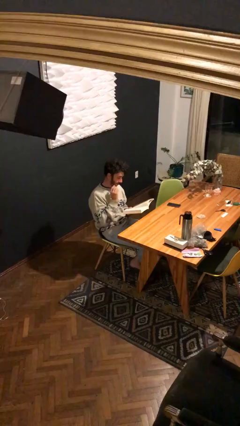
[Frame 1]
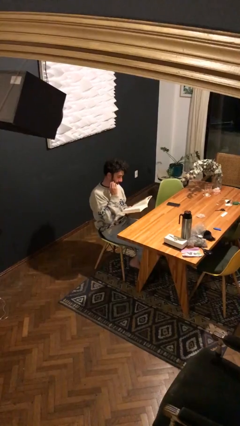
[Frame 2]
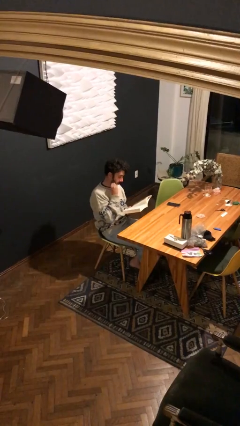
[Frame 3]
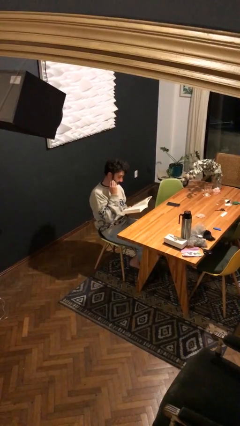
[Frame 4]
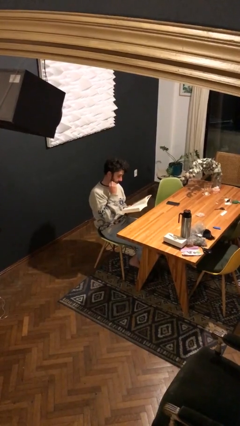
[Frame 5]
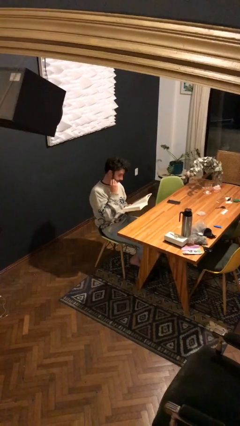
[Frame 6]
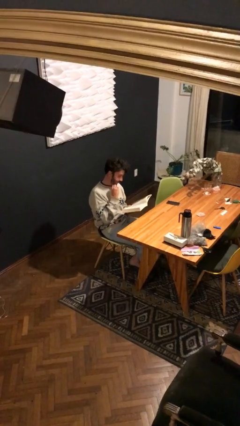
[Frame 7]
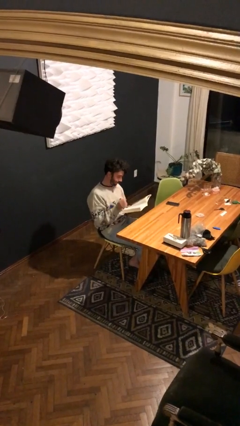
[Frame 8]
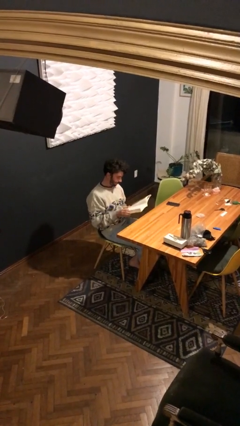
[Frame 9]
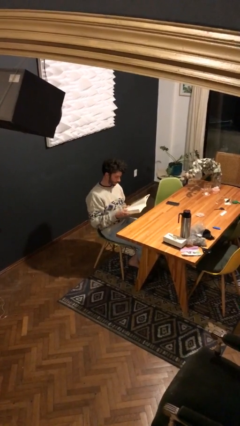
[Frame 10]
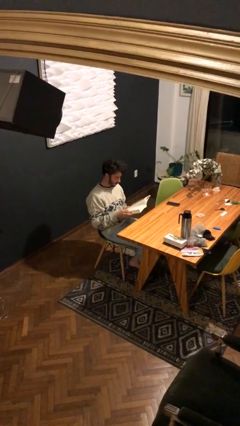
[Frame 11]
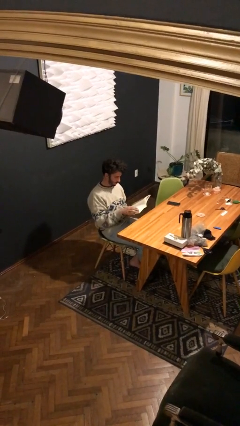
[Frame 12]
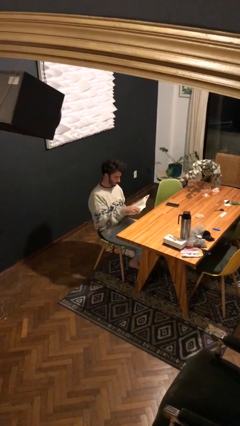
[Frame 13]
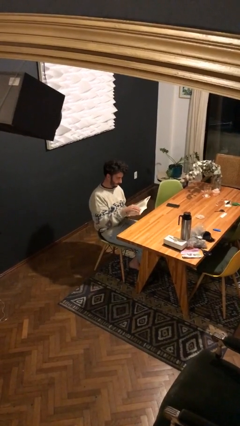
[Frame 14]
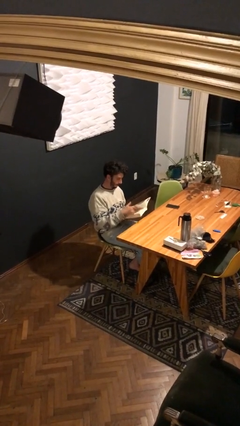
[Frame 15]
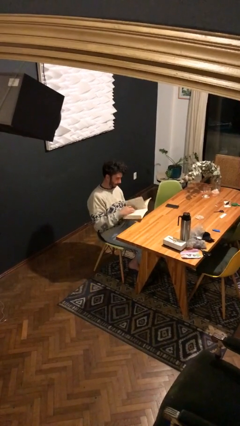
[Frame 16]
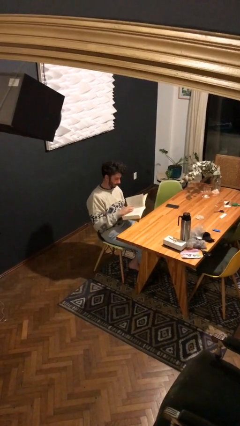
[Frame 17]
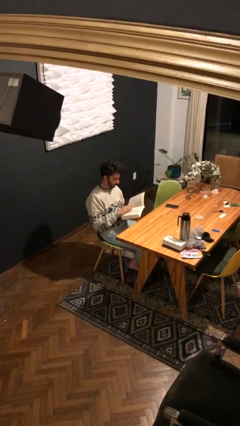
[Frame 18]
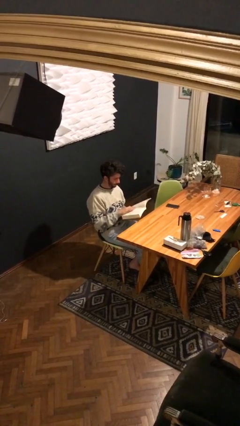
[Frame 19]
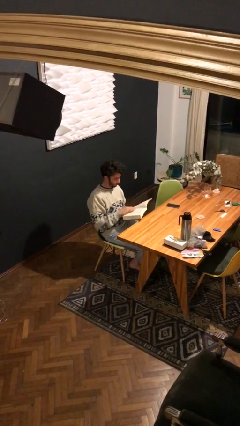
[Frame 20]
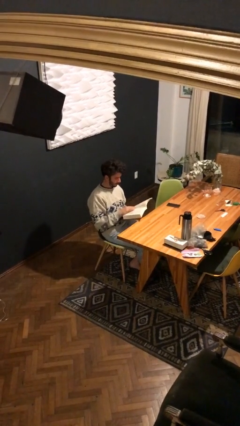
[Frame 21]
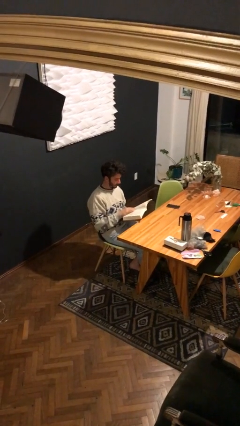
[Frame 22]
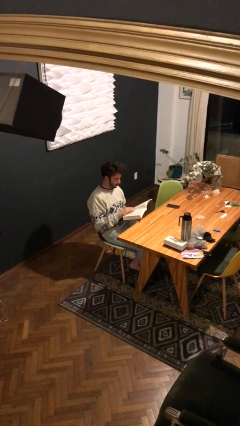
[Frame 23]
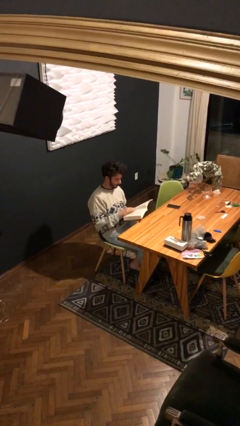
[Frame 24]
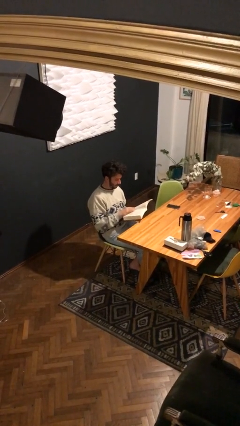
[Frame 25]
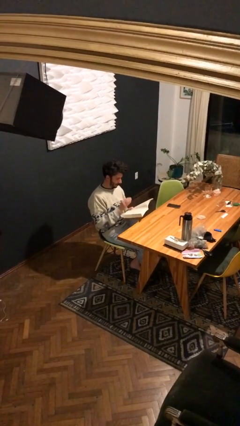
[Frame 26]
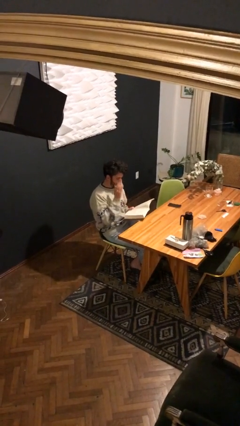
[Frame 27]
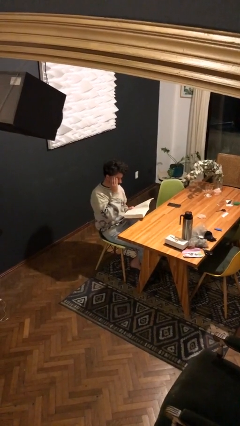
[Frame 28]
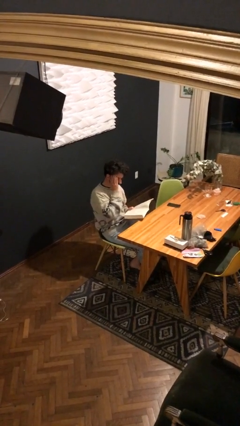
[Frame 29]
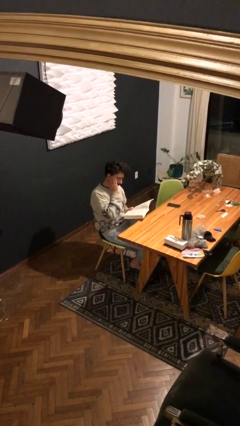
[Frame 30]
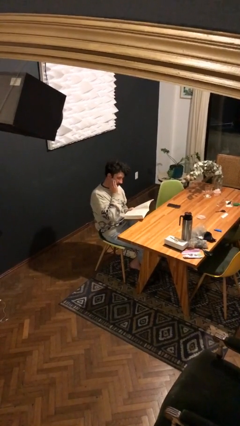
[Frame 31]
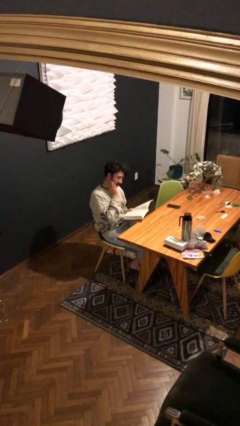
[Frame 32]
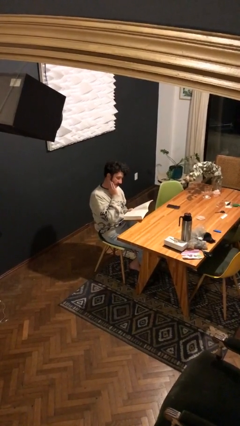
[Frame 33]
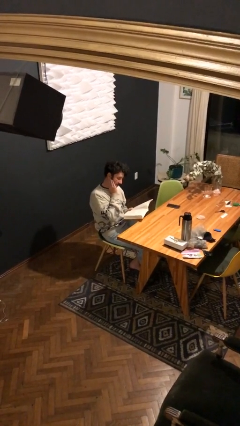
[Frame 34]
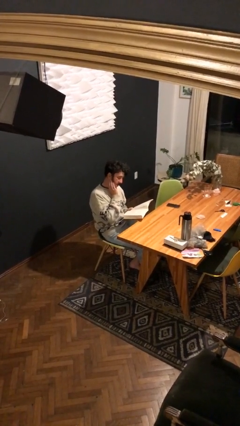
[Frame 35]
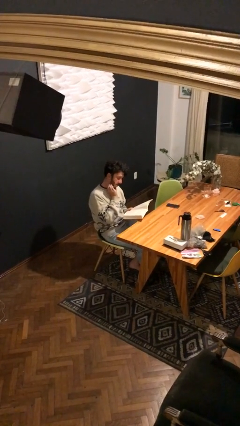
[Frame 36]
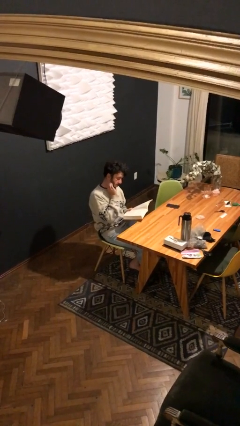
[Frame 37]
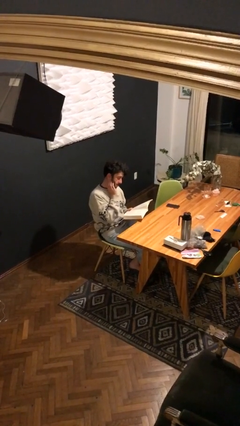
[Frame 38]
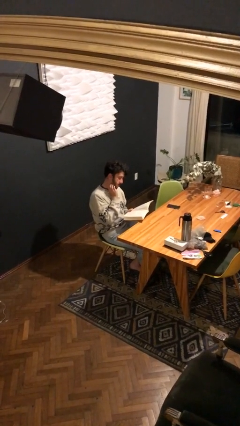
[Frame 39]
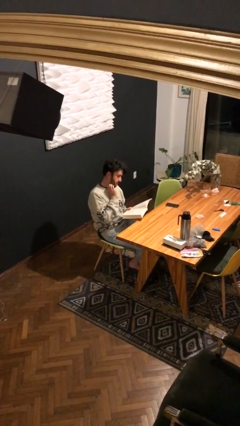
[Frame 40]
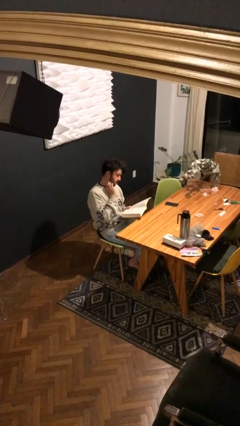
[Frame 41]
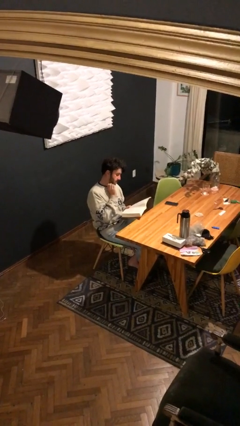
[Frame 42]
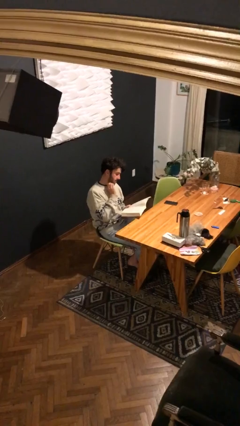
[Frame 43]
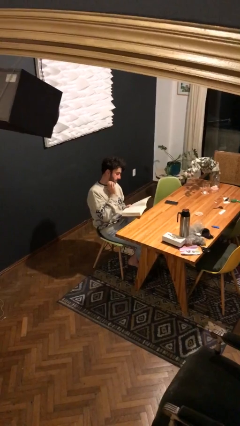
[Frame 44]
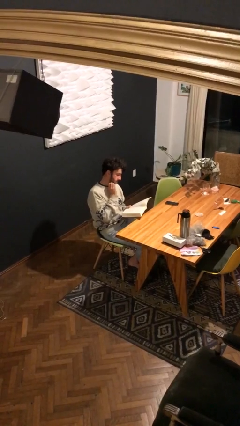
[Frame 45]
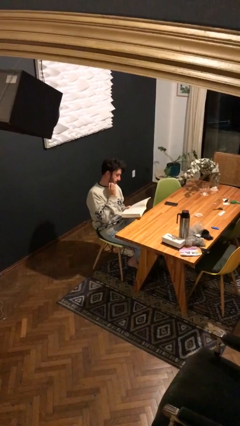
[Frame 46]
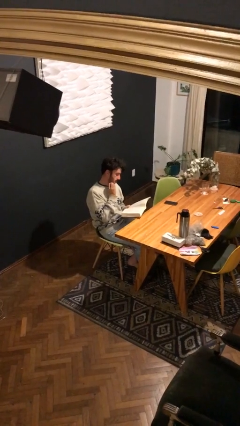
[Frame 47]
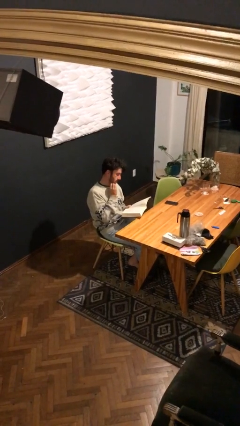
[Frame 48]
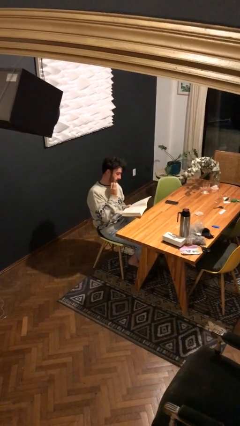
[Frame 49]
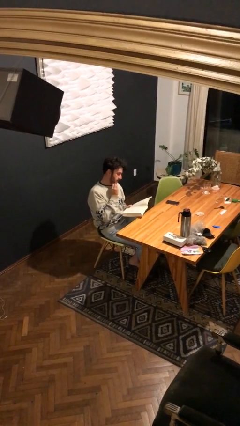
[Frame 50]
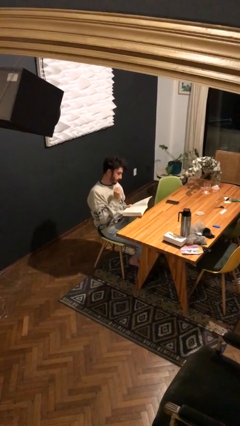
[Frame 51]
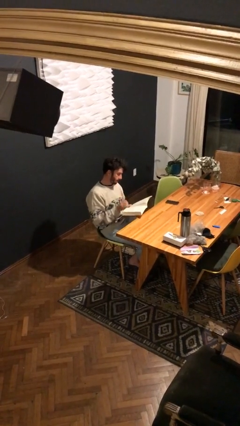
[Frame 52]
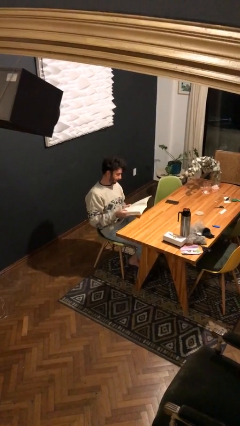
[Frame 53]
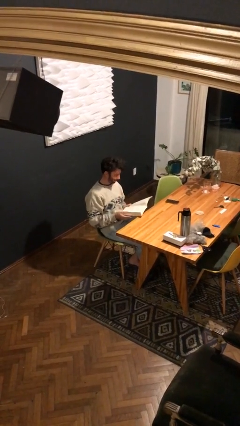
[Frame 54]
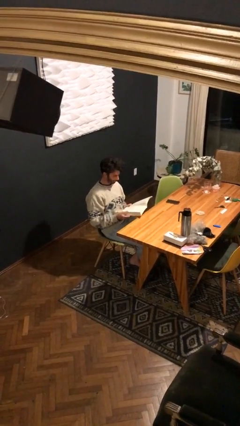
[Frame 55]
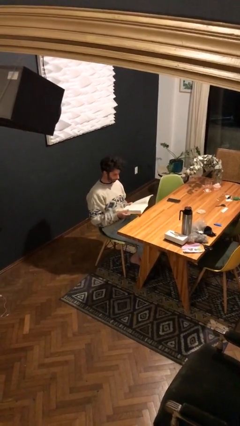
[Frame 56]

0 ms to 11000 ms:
person reads document

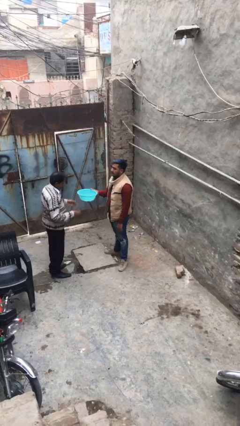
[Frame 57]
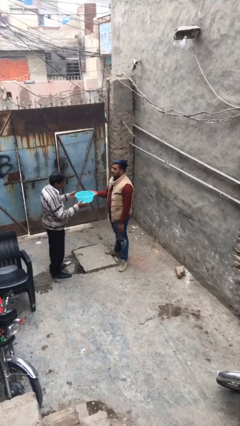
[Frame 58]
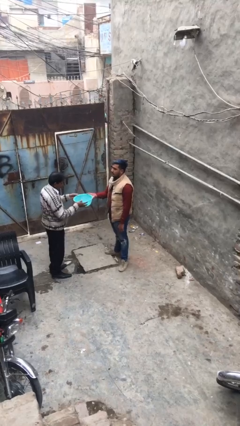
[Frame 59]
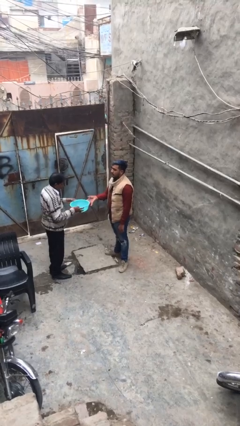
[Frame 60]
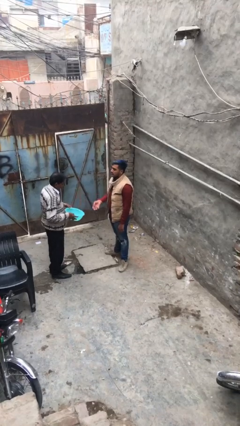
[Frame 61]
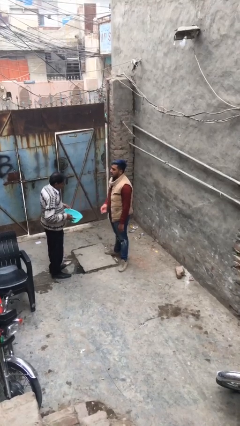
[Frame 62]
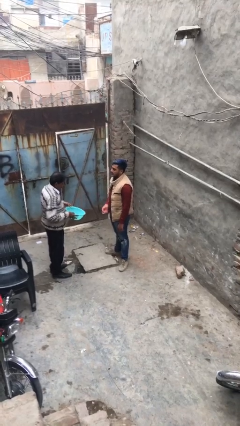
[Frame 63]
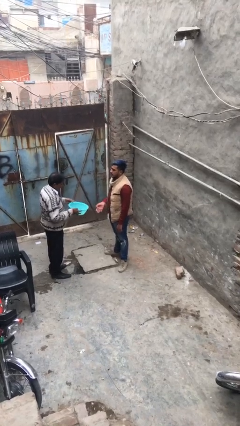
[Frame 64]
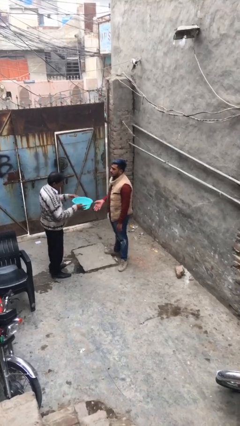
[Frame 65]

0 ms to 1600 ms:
person transfers object to person

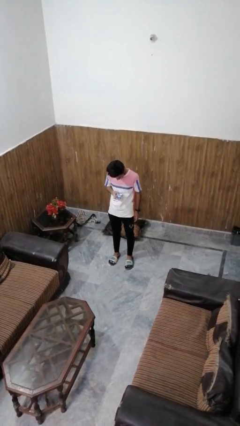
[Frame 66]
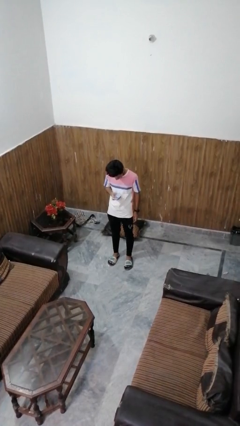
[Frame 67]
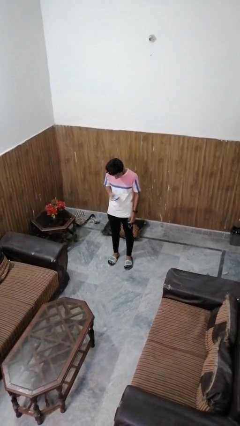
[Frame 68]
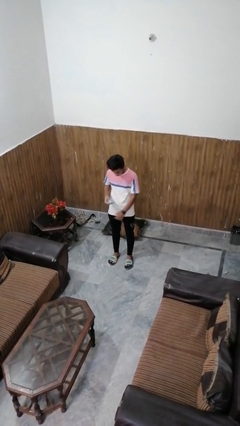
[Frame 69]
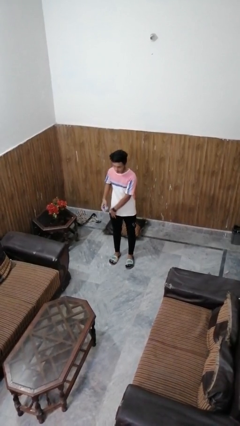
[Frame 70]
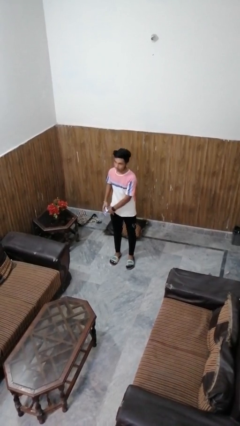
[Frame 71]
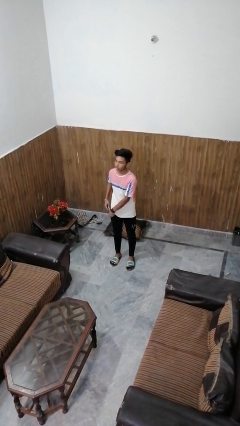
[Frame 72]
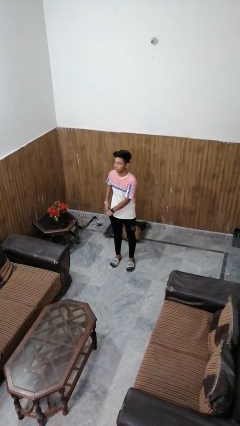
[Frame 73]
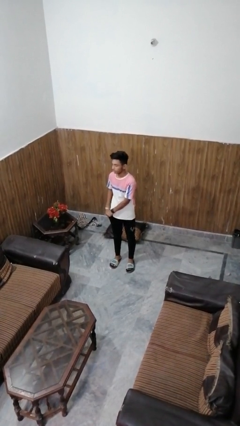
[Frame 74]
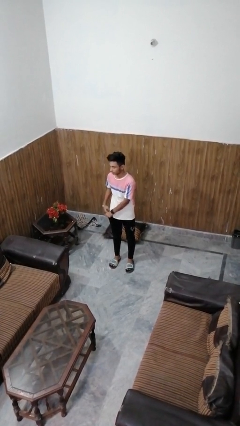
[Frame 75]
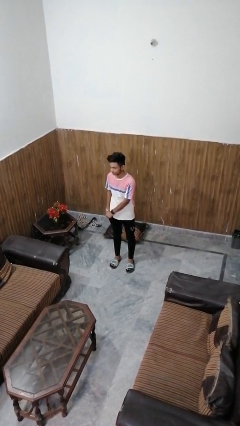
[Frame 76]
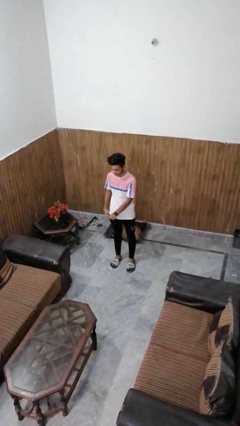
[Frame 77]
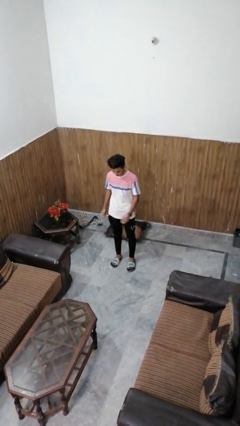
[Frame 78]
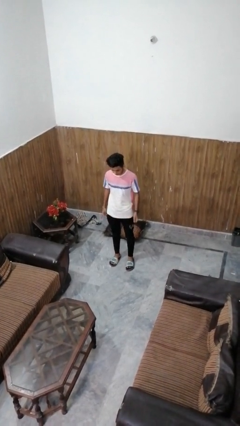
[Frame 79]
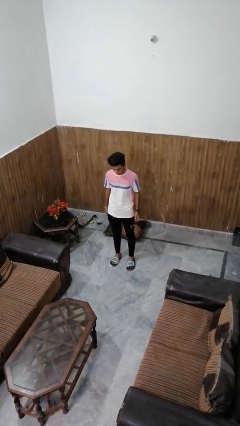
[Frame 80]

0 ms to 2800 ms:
person puts phone into pocket

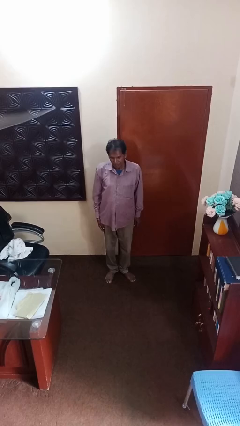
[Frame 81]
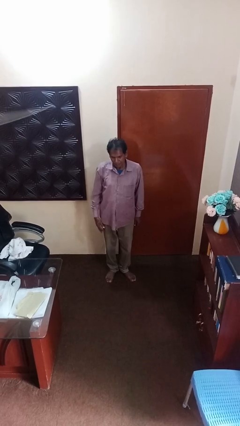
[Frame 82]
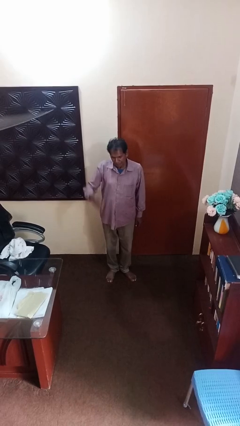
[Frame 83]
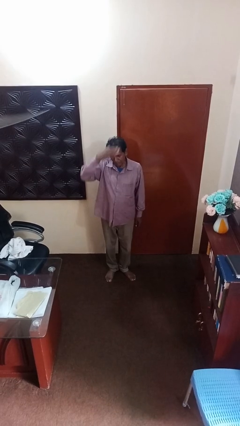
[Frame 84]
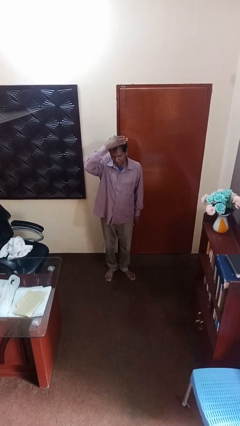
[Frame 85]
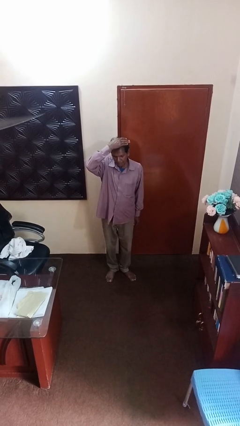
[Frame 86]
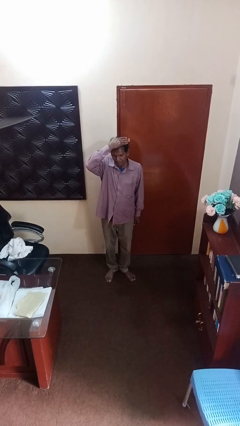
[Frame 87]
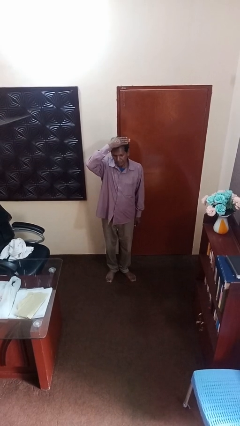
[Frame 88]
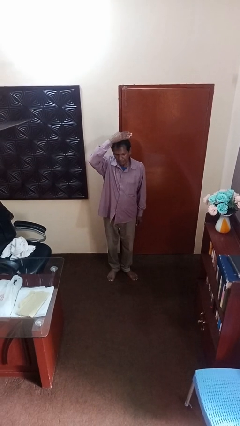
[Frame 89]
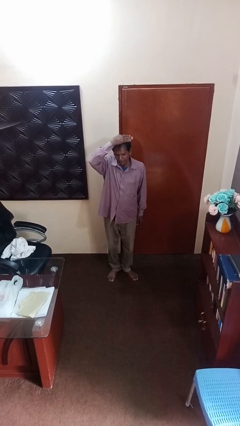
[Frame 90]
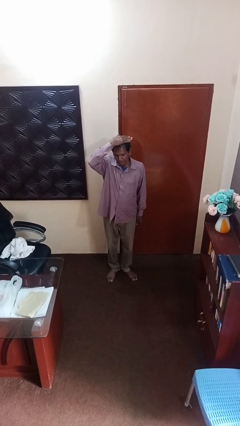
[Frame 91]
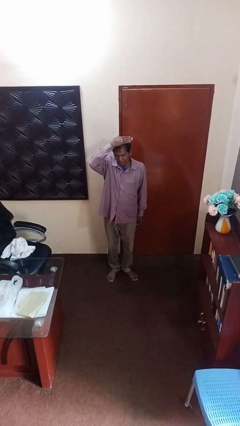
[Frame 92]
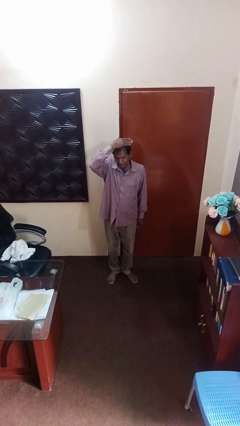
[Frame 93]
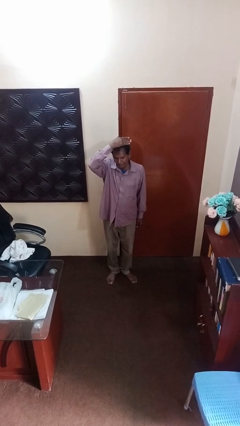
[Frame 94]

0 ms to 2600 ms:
person pats head

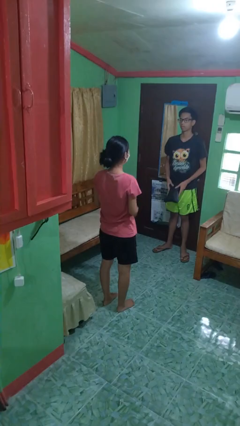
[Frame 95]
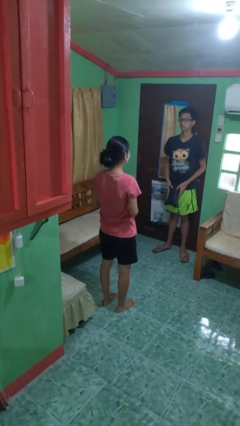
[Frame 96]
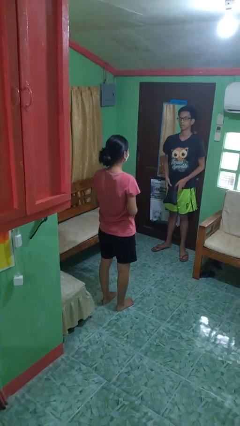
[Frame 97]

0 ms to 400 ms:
person catches object from person
